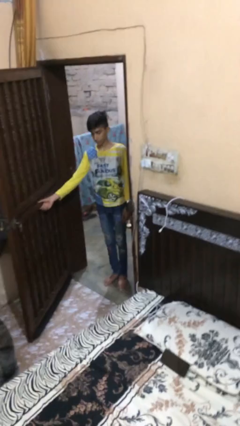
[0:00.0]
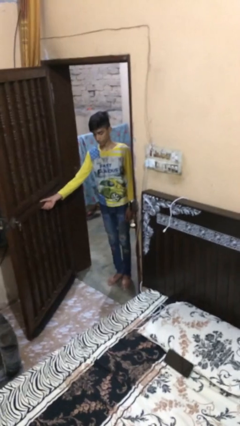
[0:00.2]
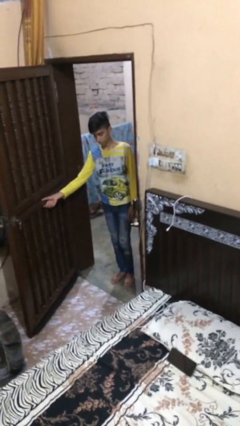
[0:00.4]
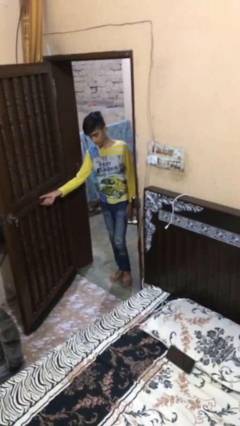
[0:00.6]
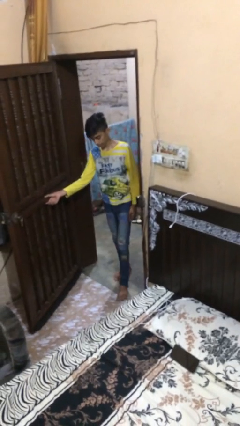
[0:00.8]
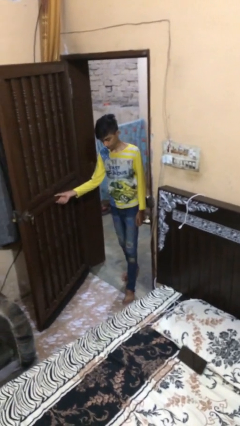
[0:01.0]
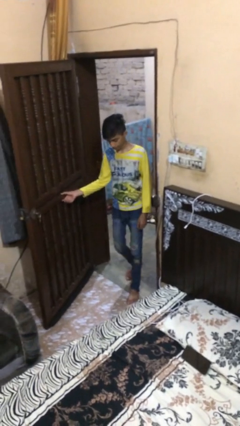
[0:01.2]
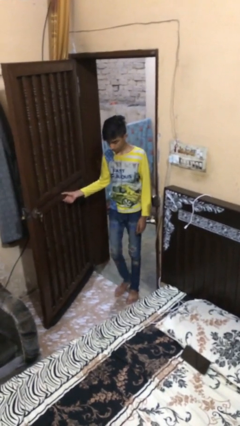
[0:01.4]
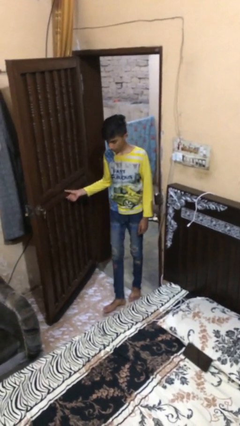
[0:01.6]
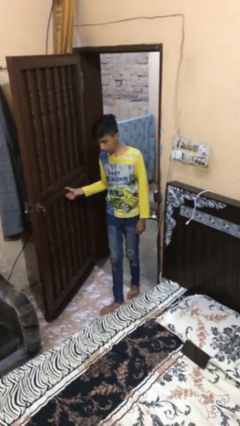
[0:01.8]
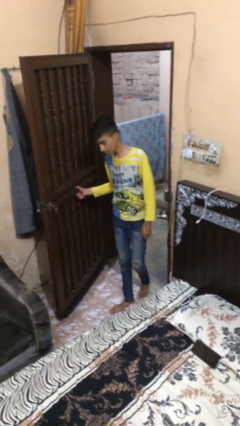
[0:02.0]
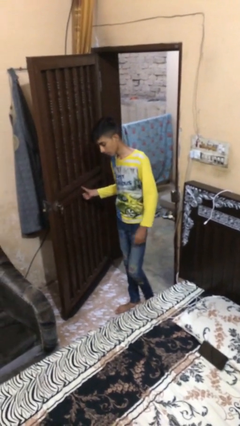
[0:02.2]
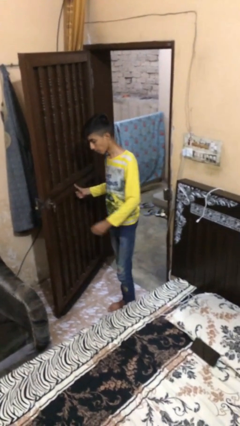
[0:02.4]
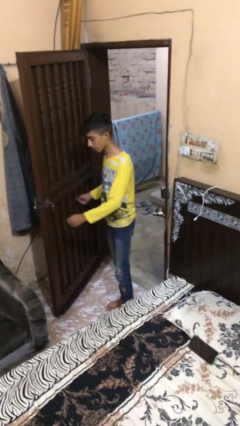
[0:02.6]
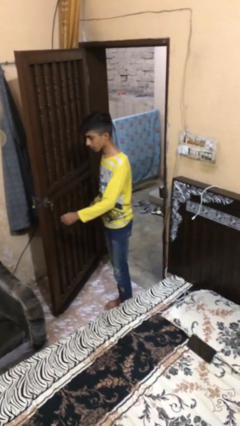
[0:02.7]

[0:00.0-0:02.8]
person enters scene through structure

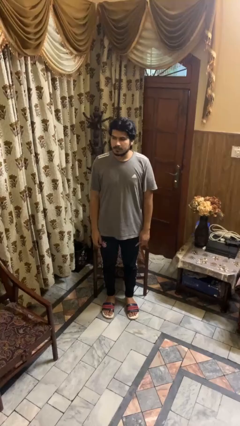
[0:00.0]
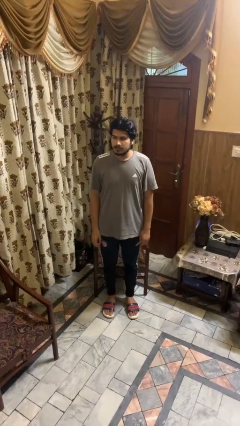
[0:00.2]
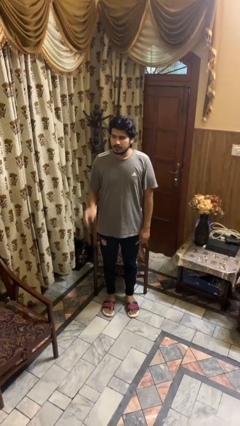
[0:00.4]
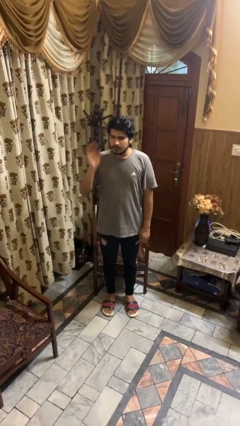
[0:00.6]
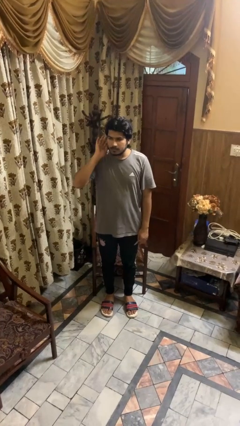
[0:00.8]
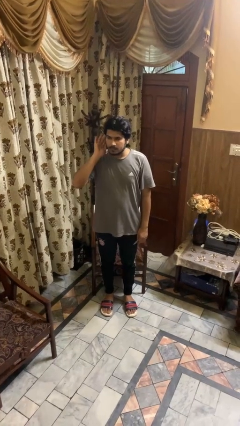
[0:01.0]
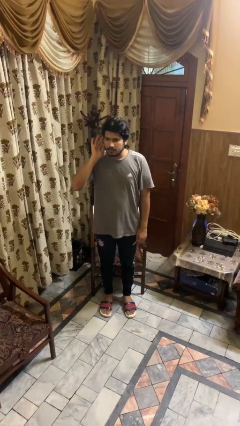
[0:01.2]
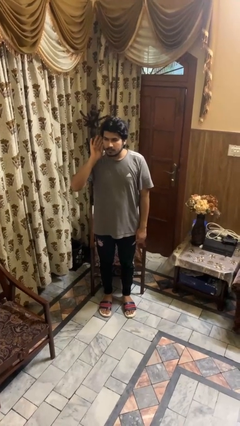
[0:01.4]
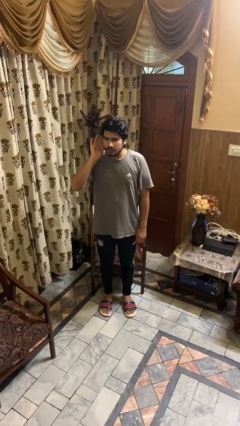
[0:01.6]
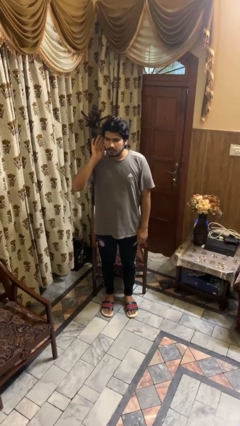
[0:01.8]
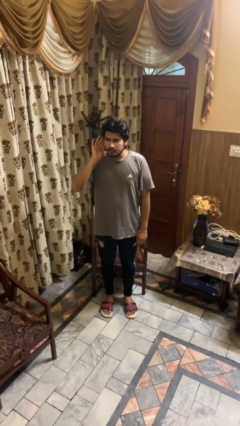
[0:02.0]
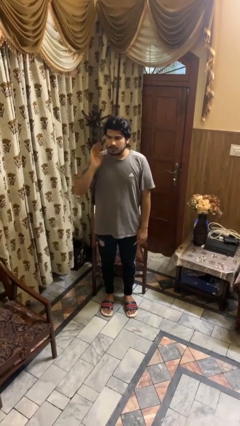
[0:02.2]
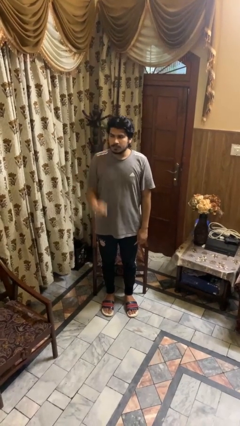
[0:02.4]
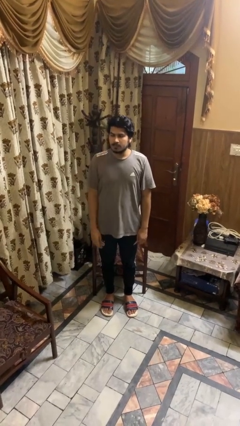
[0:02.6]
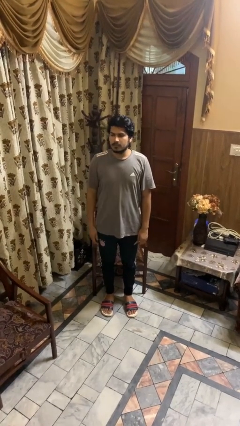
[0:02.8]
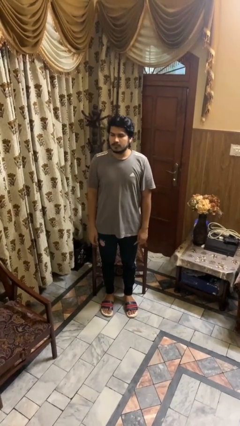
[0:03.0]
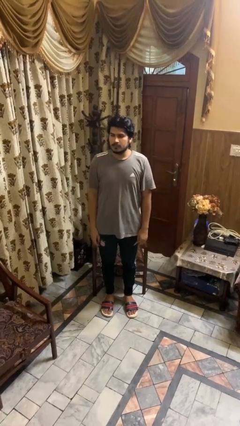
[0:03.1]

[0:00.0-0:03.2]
person gestures listen closely

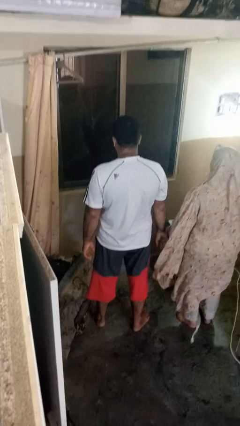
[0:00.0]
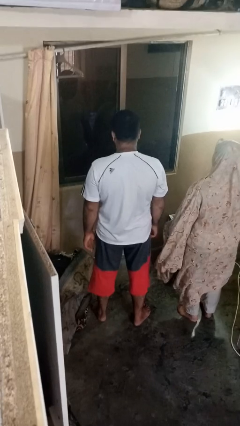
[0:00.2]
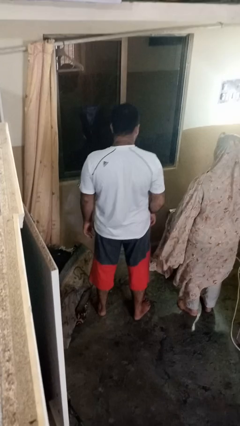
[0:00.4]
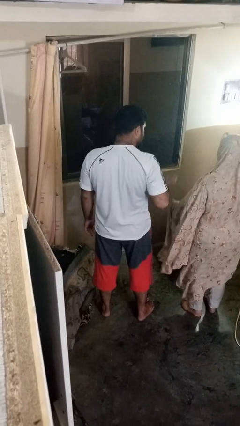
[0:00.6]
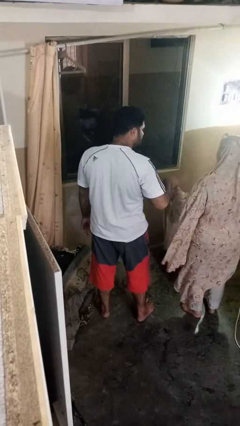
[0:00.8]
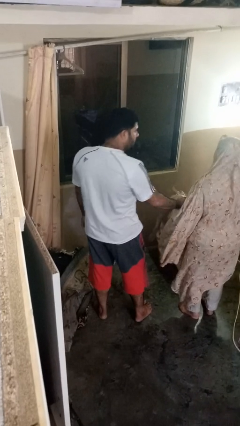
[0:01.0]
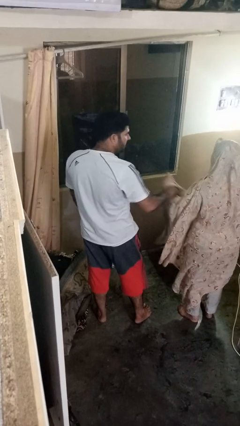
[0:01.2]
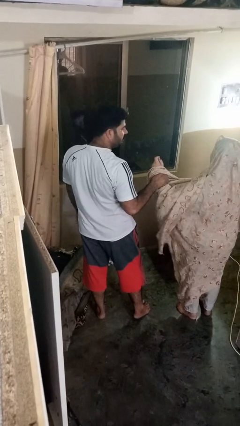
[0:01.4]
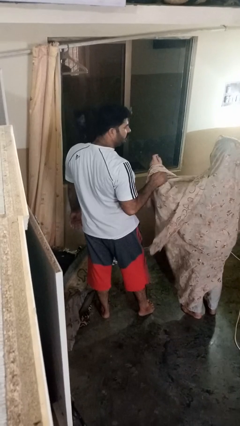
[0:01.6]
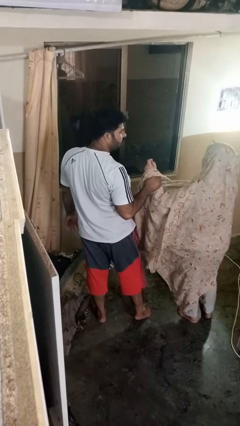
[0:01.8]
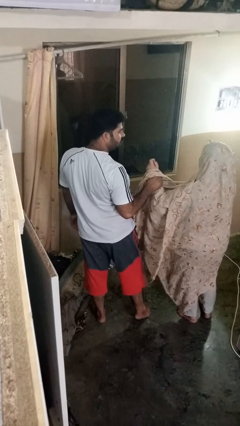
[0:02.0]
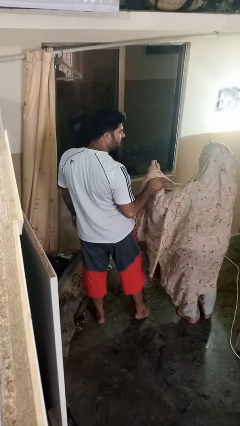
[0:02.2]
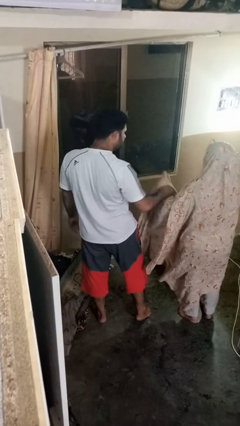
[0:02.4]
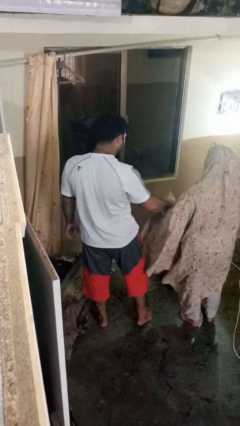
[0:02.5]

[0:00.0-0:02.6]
person grabs person by forearm

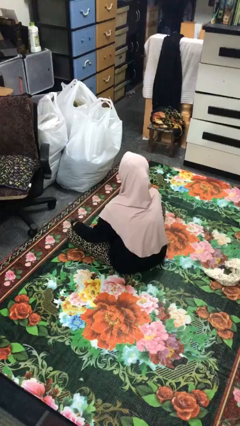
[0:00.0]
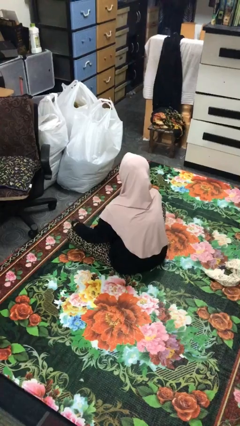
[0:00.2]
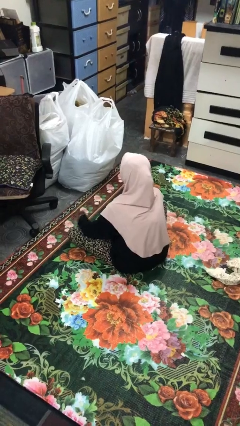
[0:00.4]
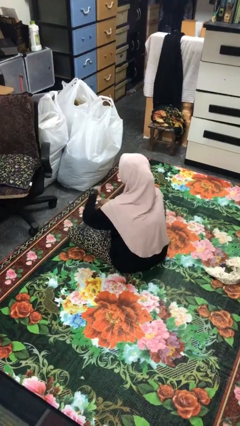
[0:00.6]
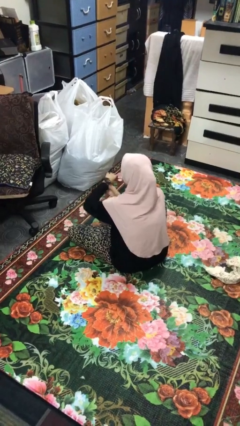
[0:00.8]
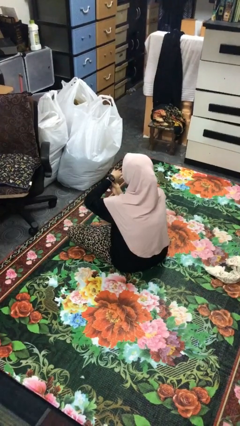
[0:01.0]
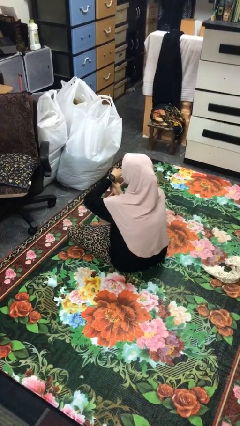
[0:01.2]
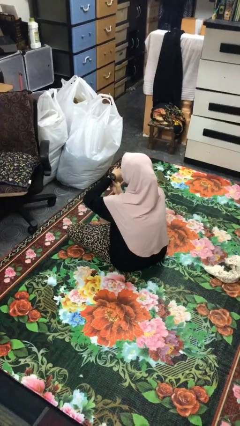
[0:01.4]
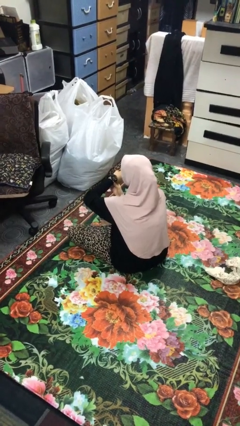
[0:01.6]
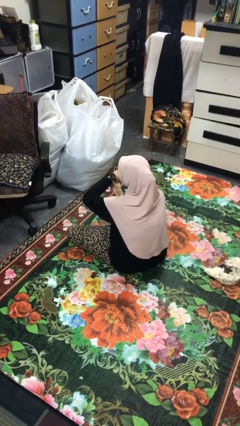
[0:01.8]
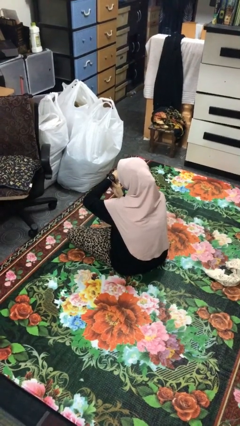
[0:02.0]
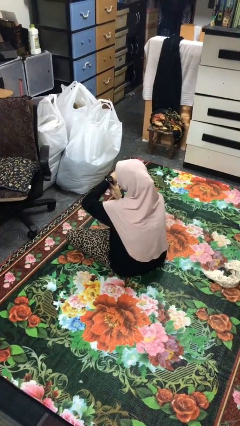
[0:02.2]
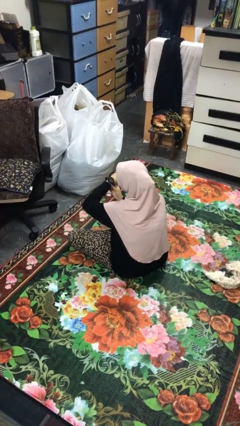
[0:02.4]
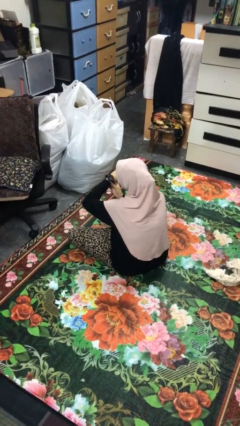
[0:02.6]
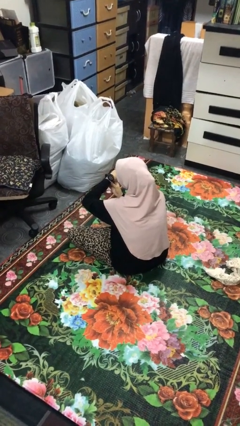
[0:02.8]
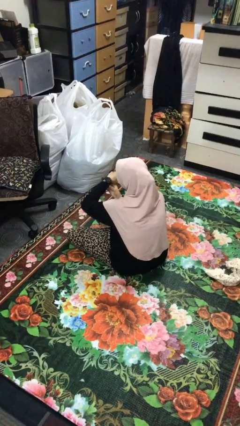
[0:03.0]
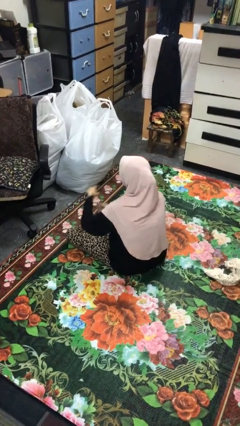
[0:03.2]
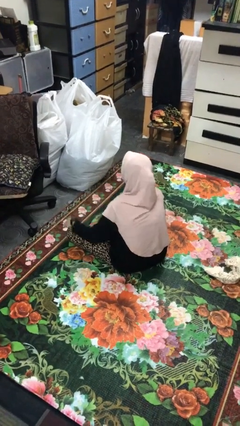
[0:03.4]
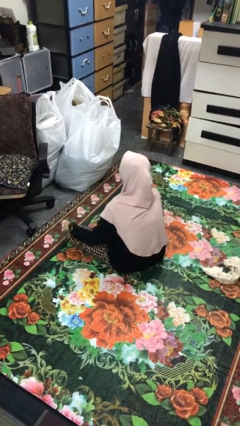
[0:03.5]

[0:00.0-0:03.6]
person looks at wristwatch

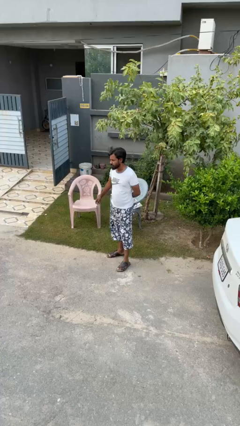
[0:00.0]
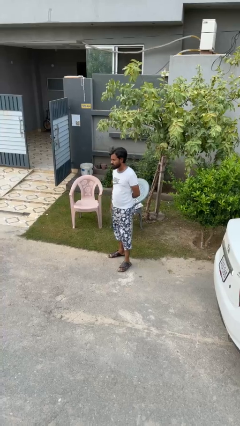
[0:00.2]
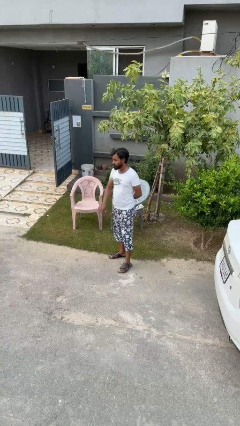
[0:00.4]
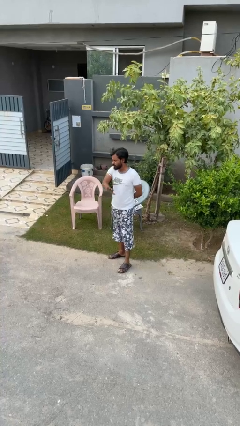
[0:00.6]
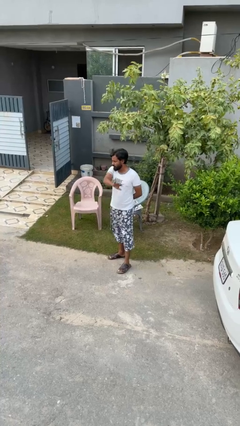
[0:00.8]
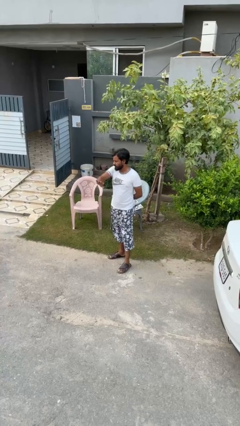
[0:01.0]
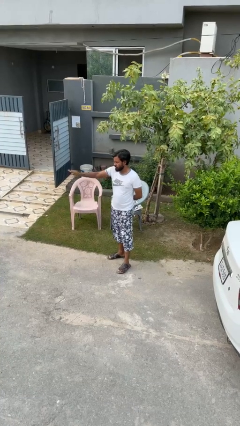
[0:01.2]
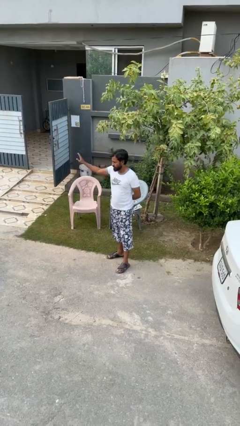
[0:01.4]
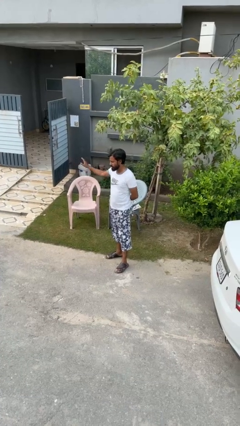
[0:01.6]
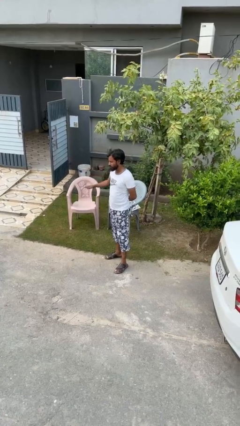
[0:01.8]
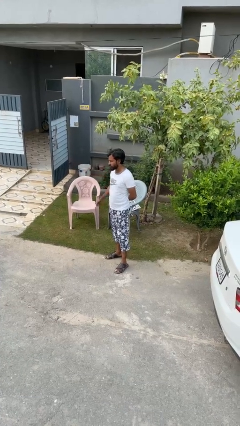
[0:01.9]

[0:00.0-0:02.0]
person gestures swipe right

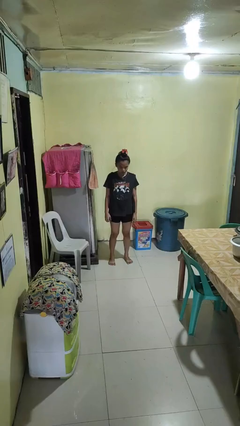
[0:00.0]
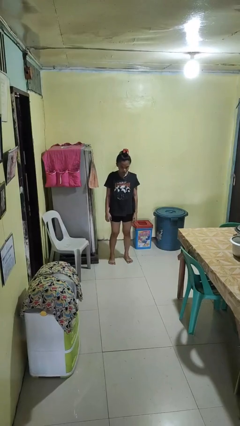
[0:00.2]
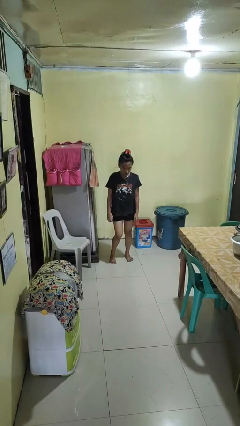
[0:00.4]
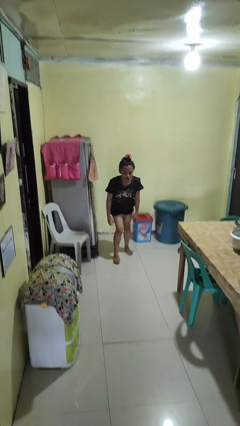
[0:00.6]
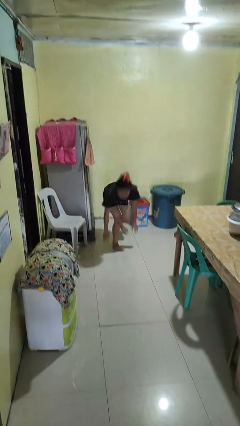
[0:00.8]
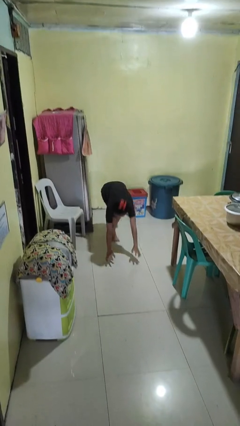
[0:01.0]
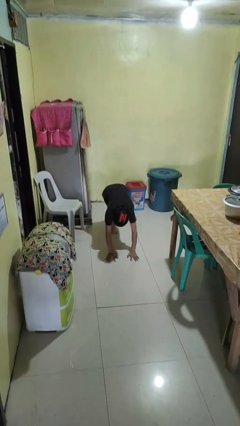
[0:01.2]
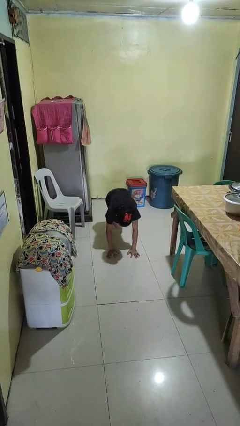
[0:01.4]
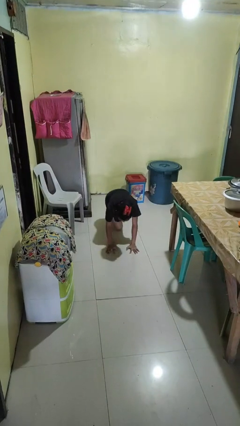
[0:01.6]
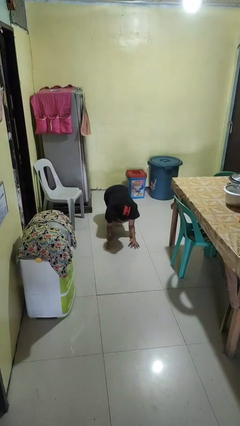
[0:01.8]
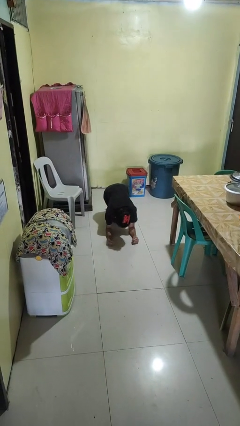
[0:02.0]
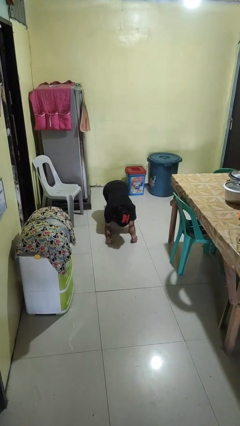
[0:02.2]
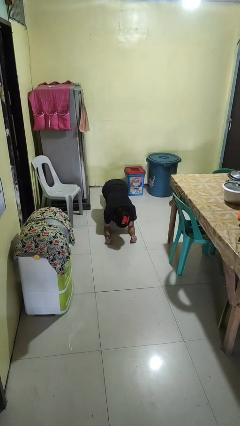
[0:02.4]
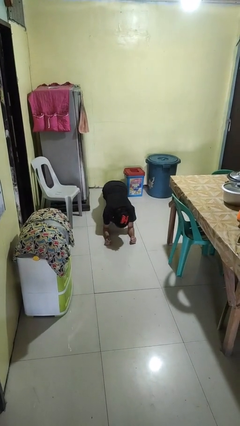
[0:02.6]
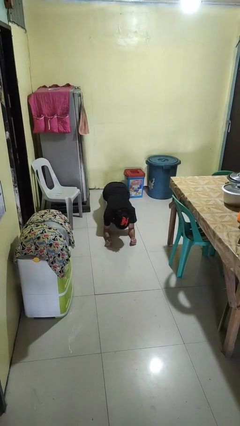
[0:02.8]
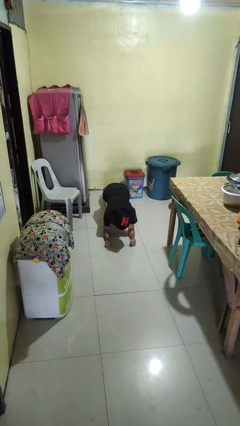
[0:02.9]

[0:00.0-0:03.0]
person exercises with plank
